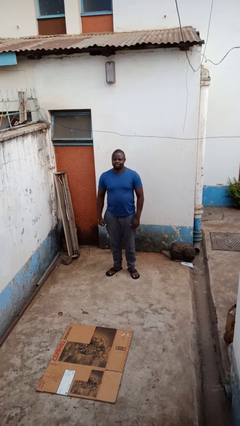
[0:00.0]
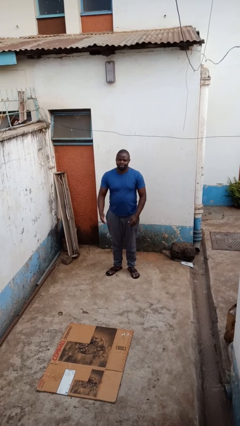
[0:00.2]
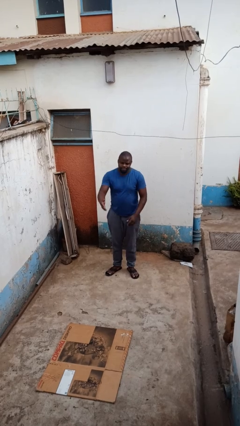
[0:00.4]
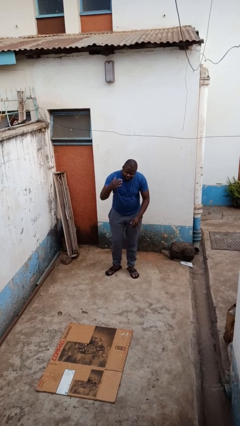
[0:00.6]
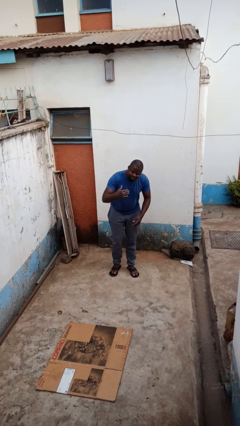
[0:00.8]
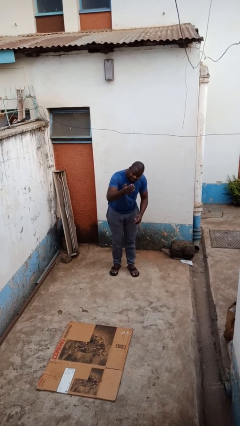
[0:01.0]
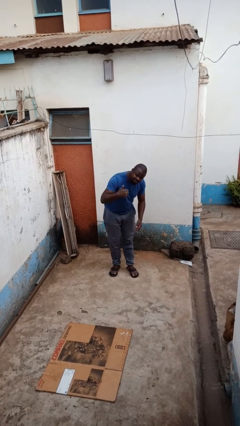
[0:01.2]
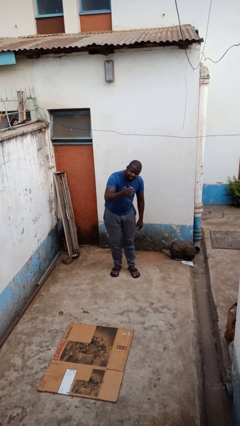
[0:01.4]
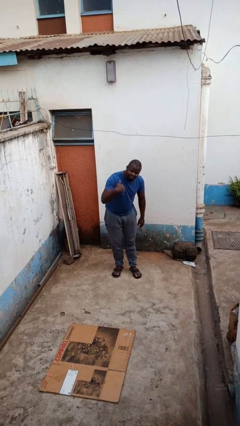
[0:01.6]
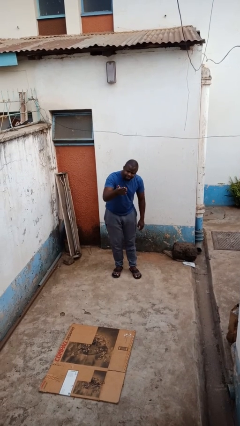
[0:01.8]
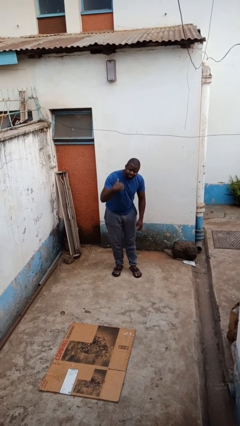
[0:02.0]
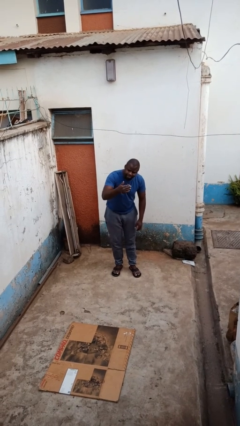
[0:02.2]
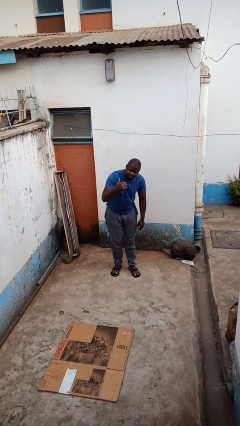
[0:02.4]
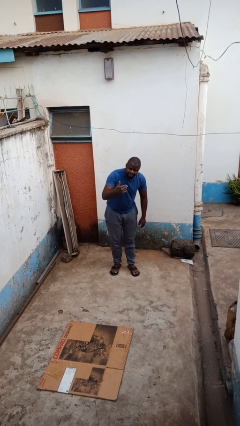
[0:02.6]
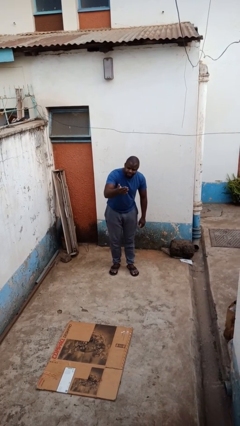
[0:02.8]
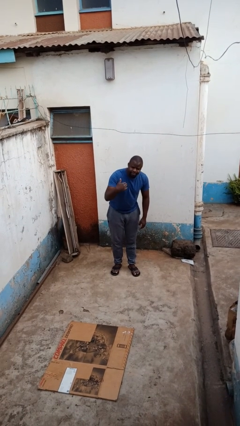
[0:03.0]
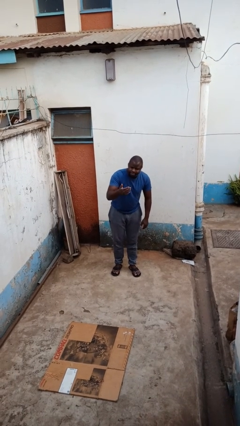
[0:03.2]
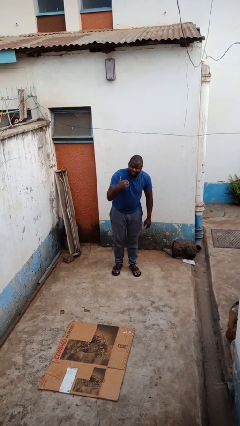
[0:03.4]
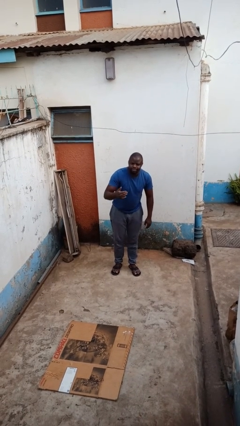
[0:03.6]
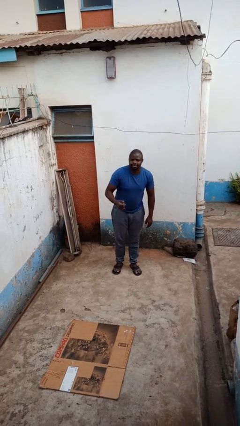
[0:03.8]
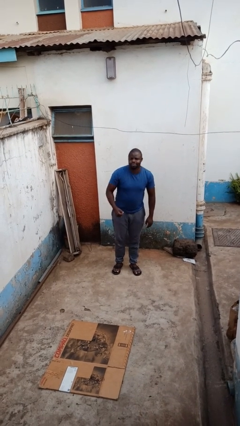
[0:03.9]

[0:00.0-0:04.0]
person gestures come here

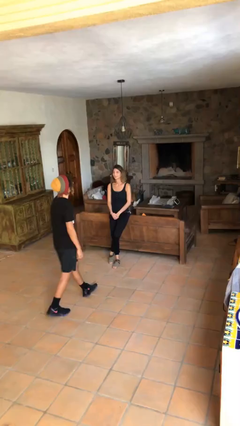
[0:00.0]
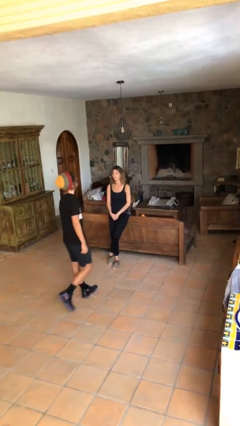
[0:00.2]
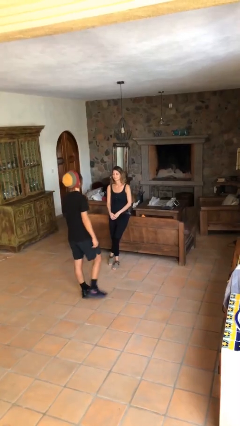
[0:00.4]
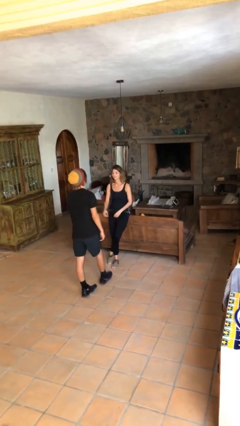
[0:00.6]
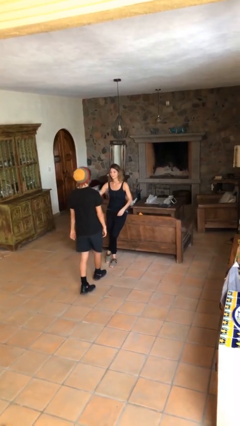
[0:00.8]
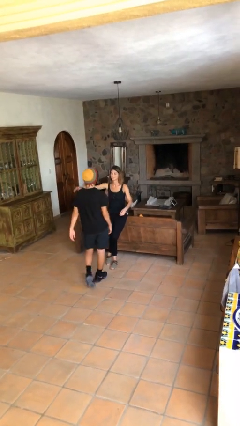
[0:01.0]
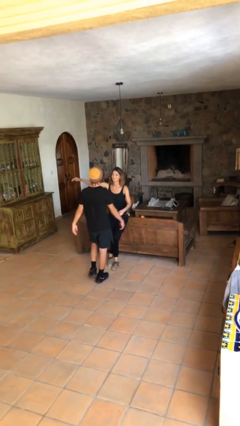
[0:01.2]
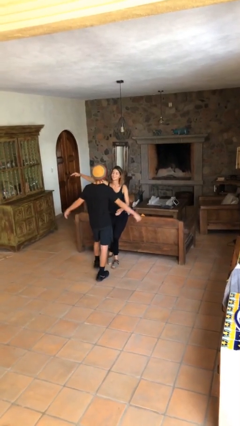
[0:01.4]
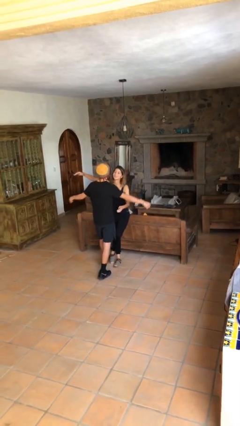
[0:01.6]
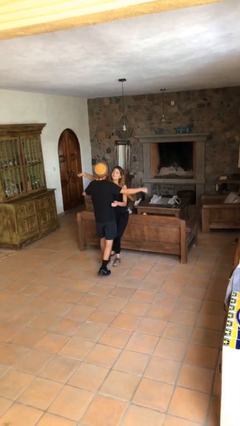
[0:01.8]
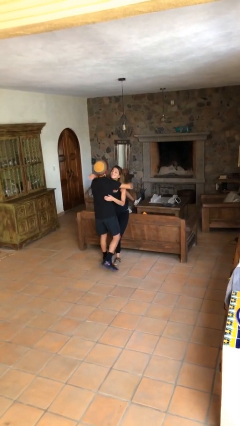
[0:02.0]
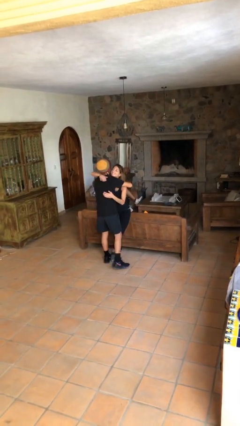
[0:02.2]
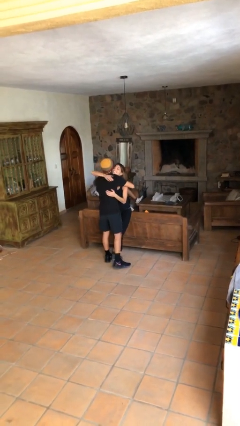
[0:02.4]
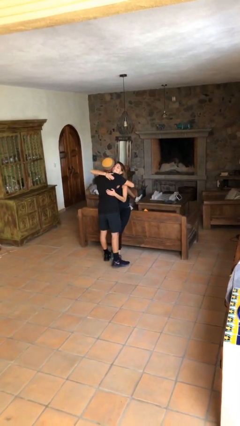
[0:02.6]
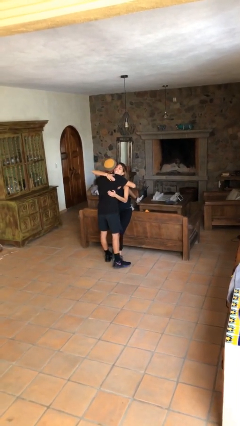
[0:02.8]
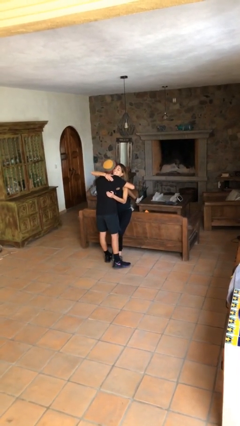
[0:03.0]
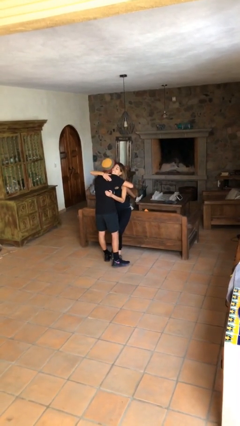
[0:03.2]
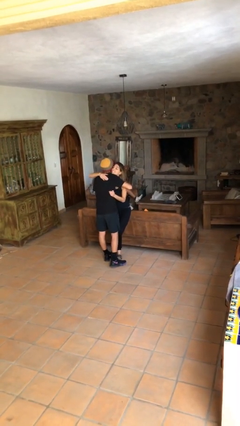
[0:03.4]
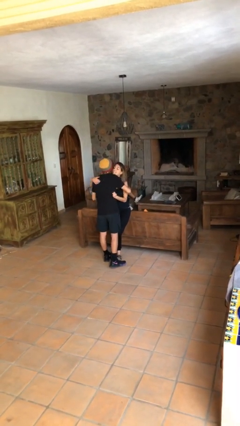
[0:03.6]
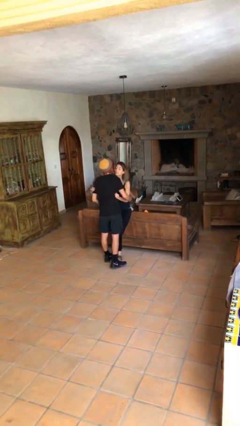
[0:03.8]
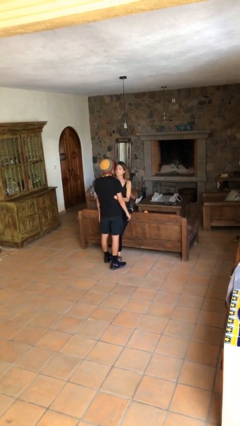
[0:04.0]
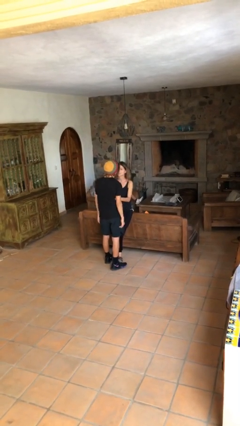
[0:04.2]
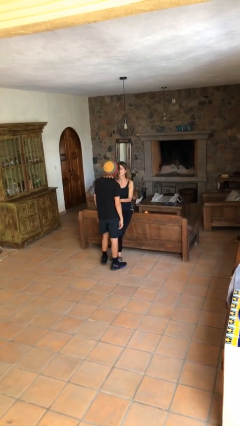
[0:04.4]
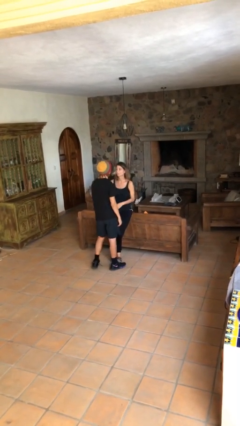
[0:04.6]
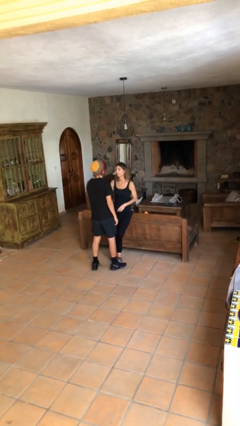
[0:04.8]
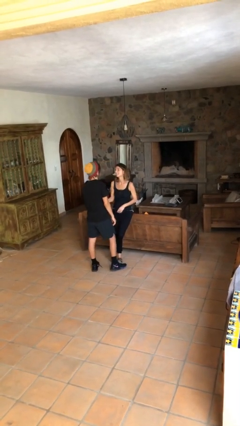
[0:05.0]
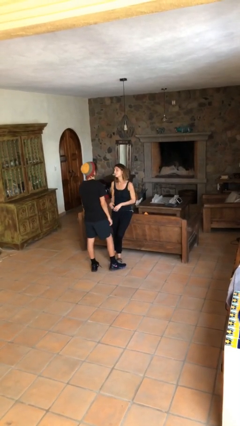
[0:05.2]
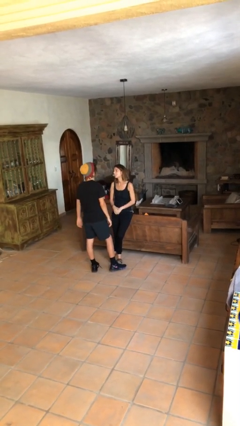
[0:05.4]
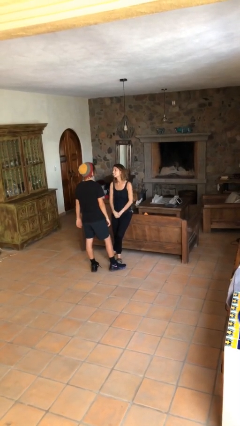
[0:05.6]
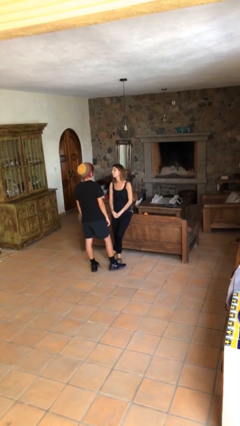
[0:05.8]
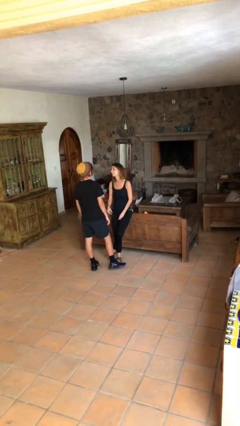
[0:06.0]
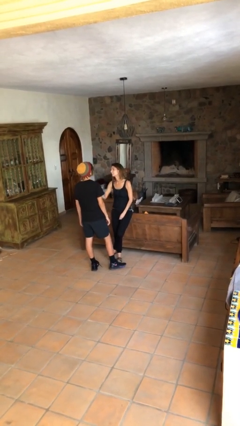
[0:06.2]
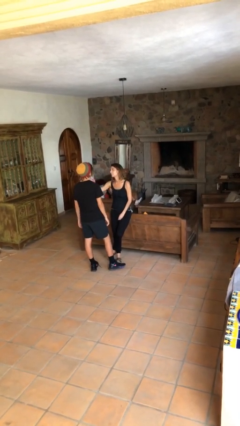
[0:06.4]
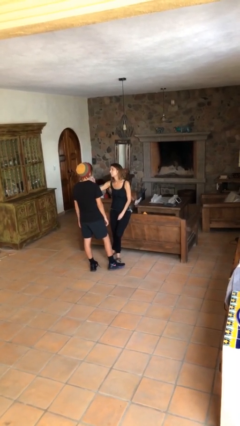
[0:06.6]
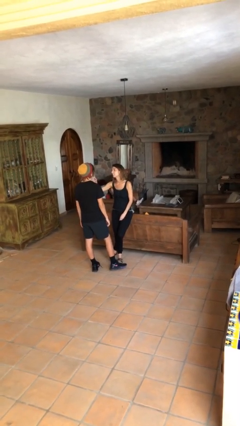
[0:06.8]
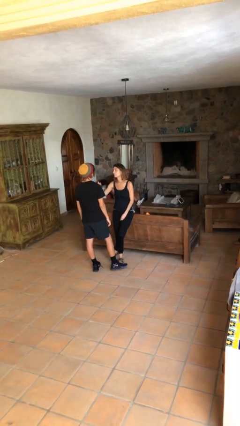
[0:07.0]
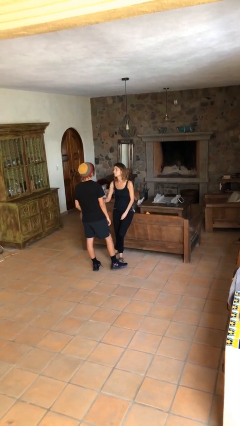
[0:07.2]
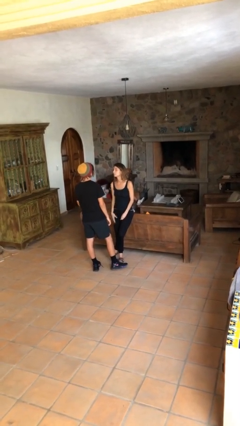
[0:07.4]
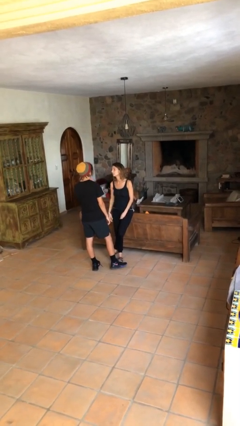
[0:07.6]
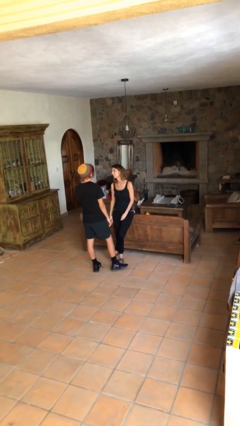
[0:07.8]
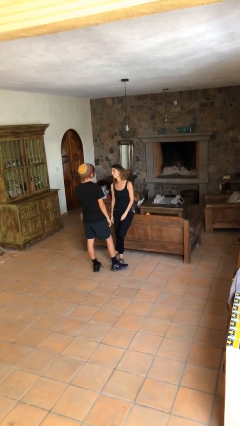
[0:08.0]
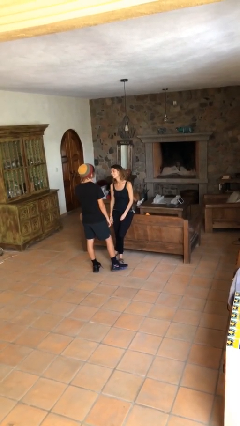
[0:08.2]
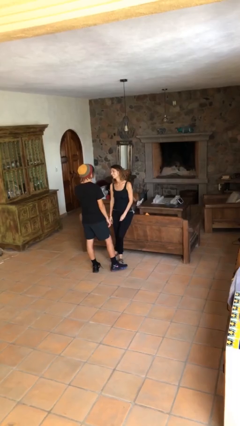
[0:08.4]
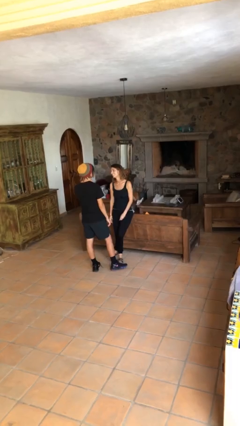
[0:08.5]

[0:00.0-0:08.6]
person embraces person

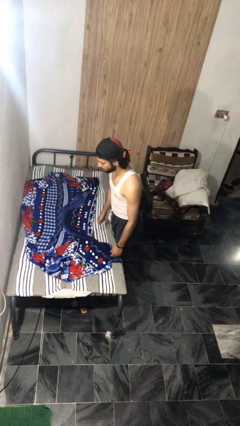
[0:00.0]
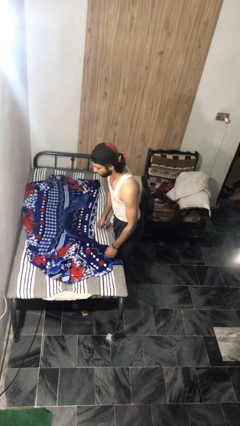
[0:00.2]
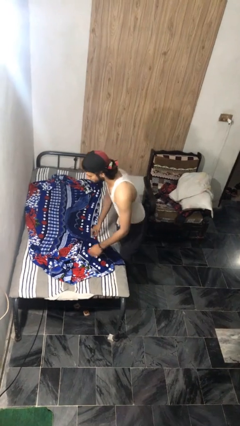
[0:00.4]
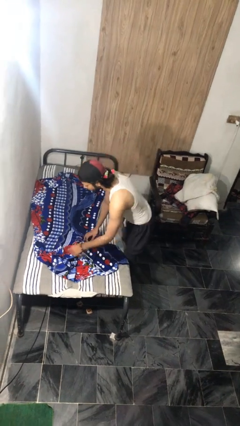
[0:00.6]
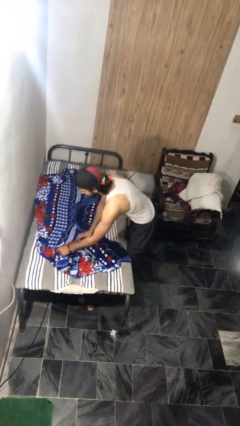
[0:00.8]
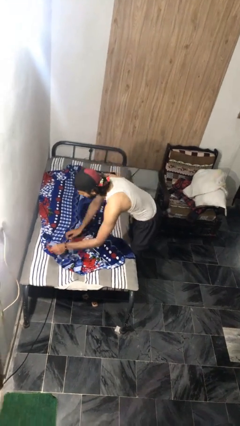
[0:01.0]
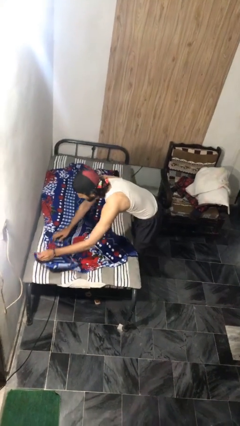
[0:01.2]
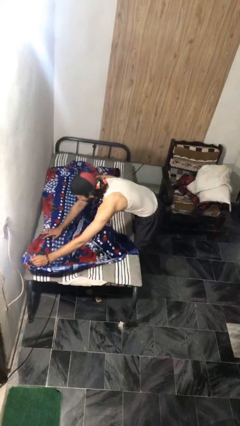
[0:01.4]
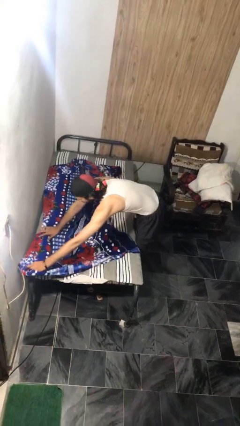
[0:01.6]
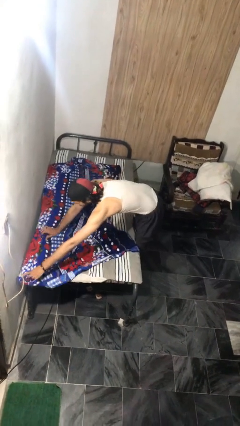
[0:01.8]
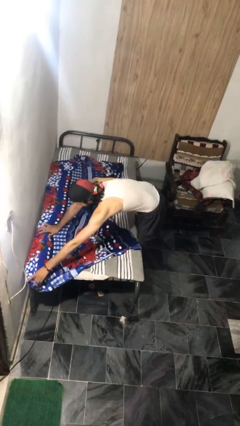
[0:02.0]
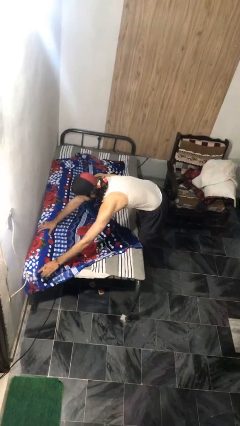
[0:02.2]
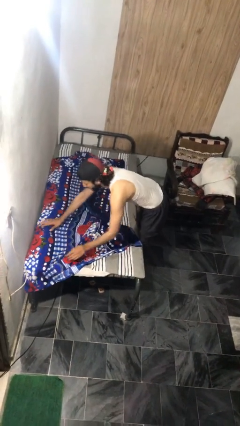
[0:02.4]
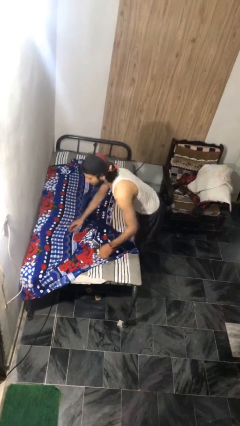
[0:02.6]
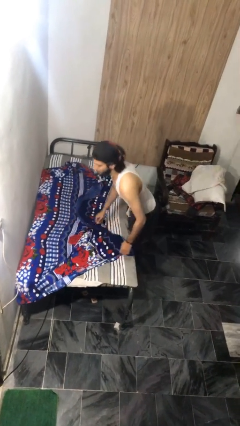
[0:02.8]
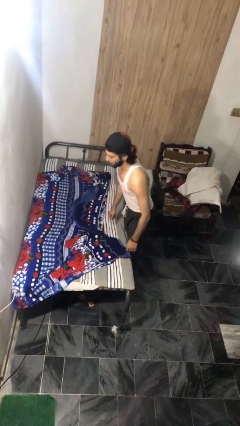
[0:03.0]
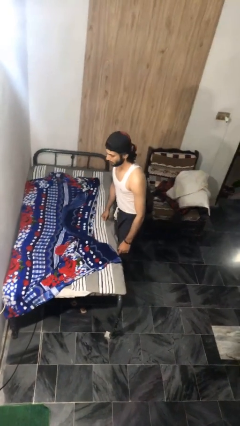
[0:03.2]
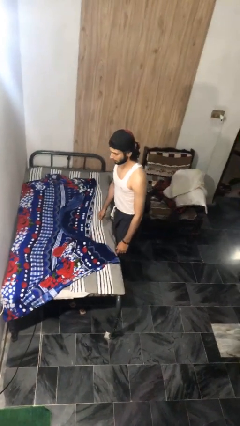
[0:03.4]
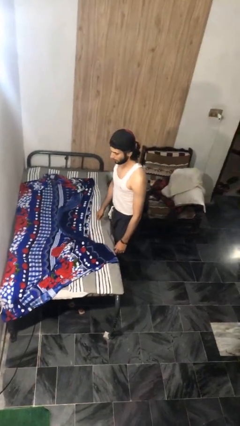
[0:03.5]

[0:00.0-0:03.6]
person makes bed

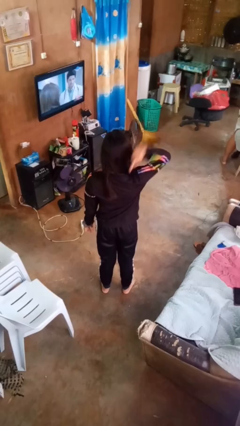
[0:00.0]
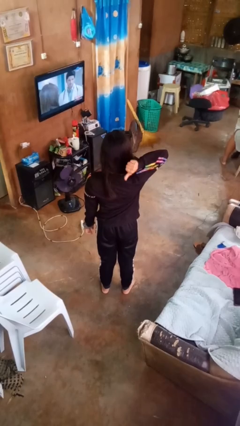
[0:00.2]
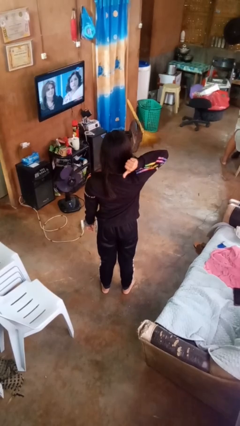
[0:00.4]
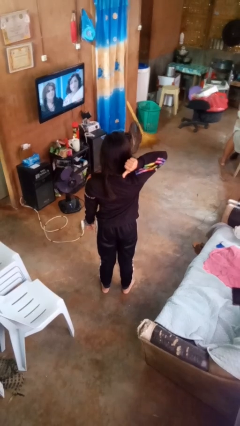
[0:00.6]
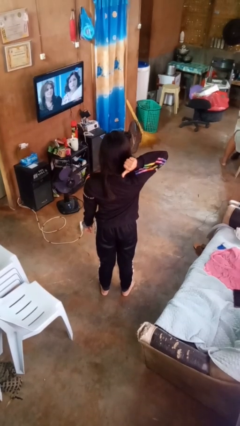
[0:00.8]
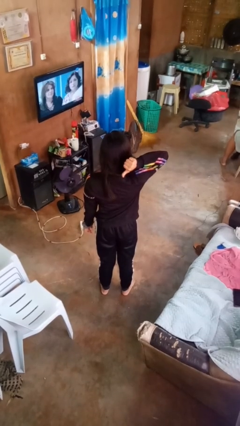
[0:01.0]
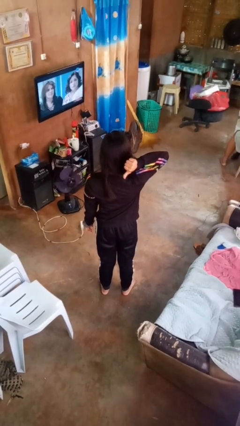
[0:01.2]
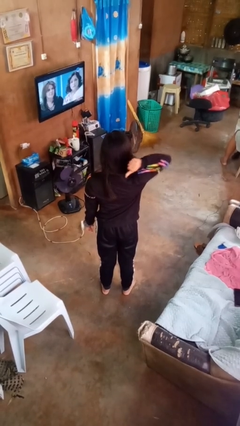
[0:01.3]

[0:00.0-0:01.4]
person gestures behind me
